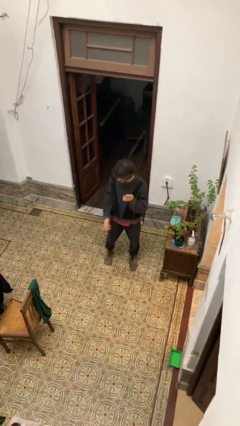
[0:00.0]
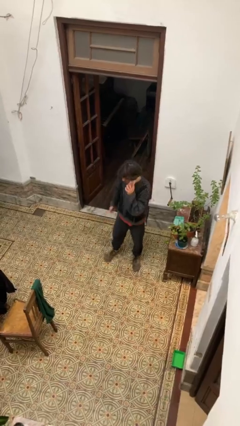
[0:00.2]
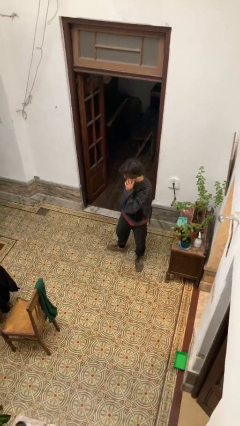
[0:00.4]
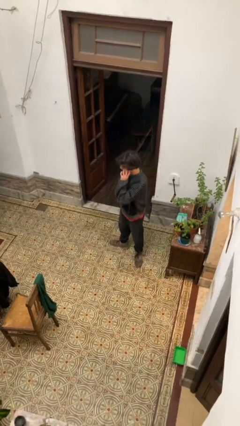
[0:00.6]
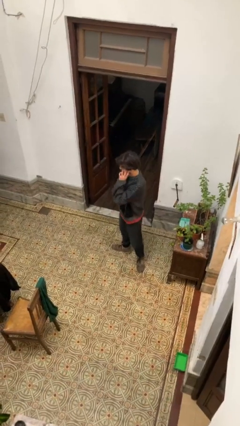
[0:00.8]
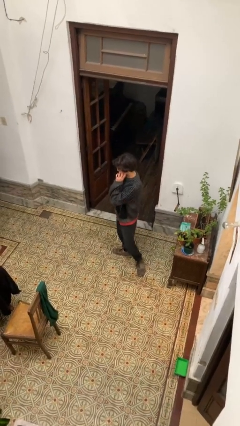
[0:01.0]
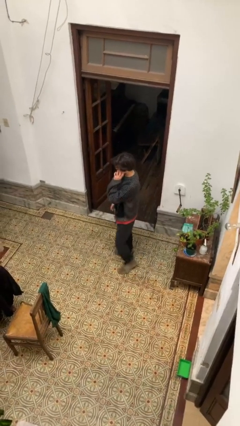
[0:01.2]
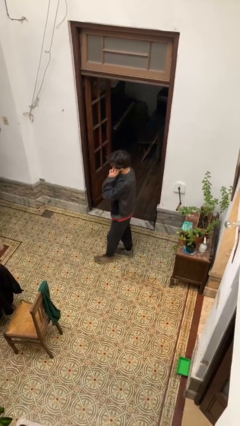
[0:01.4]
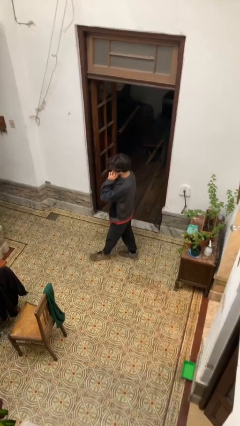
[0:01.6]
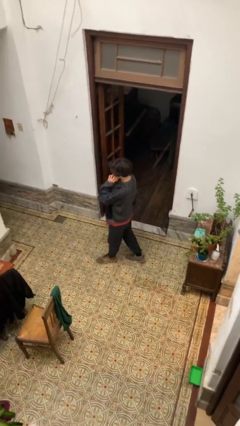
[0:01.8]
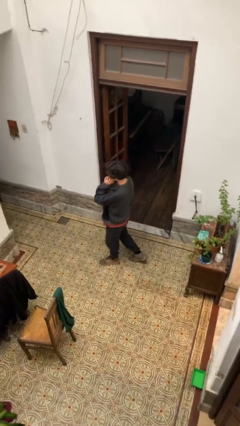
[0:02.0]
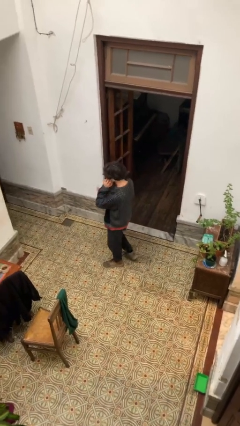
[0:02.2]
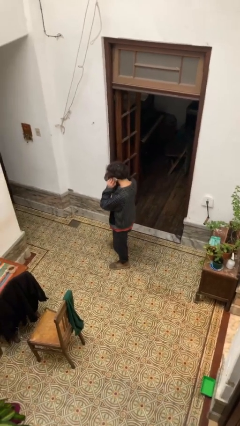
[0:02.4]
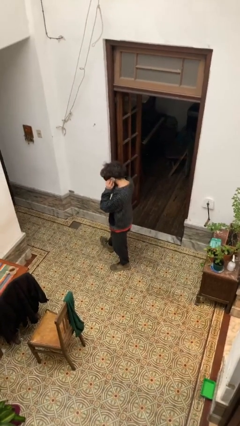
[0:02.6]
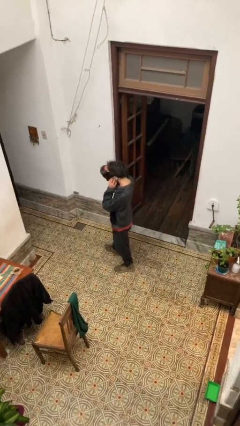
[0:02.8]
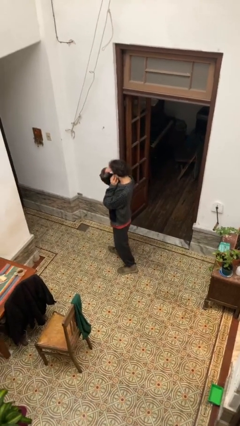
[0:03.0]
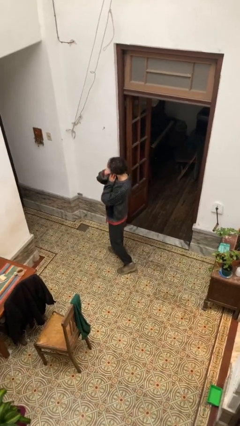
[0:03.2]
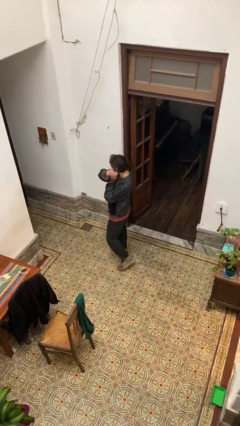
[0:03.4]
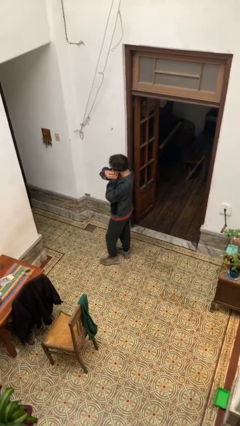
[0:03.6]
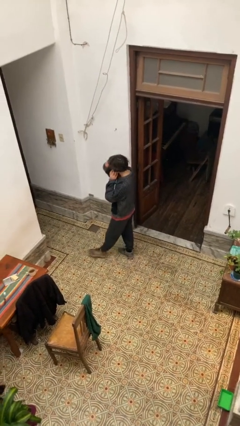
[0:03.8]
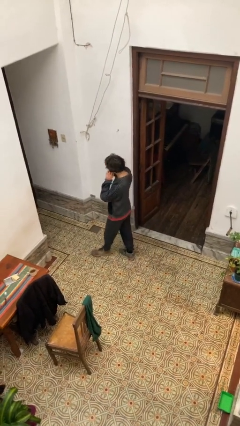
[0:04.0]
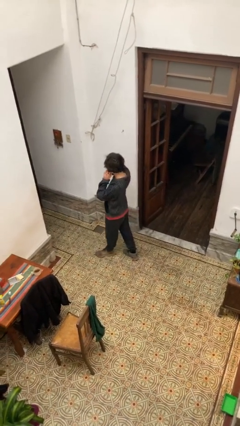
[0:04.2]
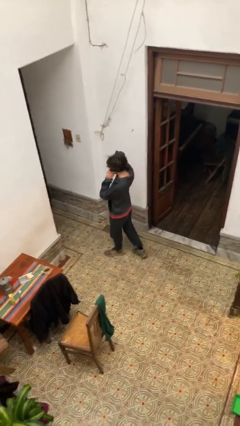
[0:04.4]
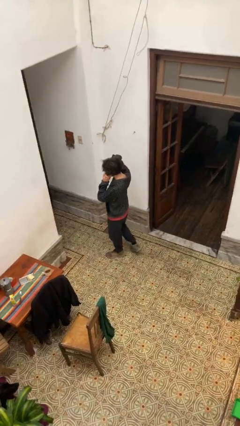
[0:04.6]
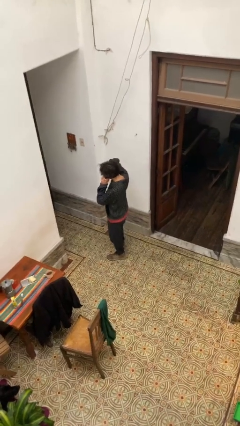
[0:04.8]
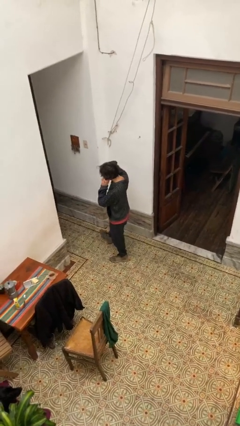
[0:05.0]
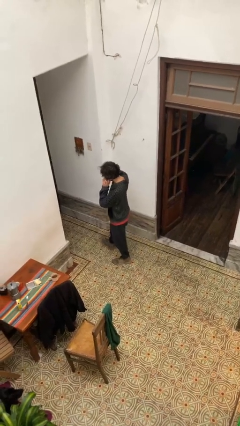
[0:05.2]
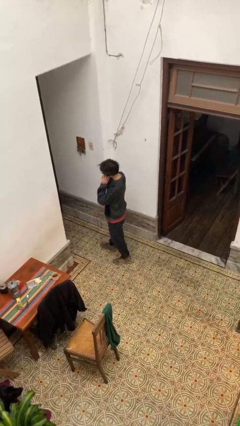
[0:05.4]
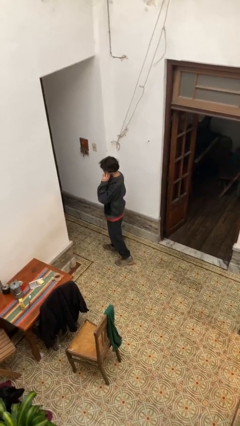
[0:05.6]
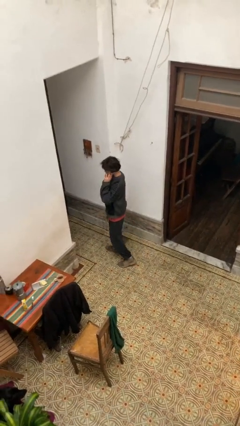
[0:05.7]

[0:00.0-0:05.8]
person talks on phone

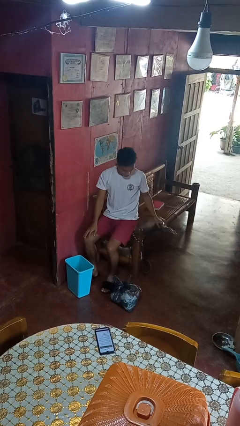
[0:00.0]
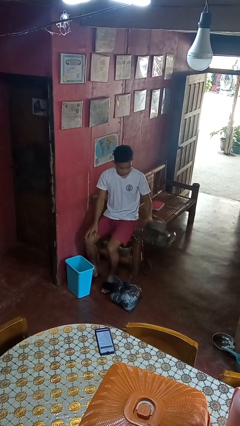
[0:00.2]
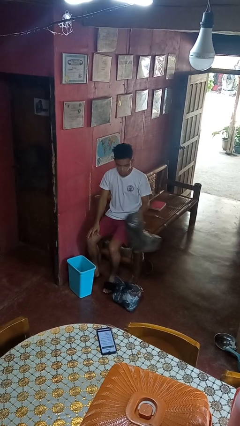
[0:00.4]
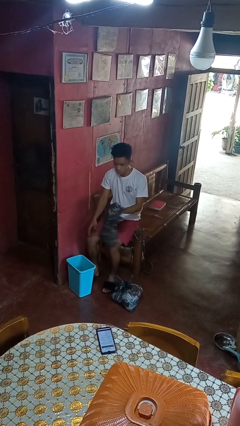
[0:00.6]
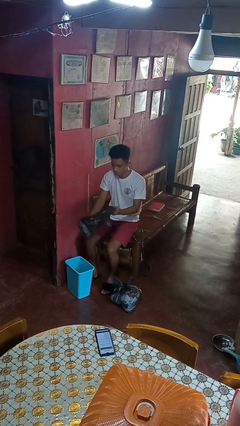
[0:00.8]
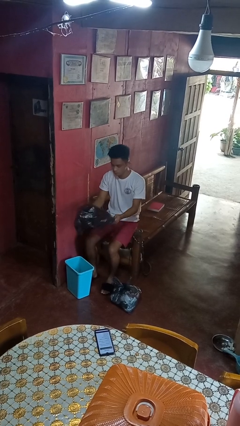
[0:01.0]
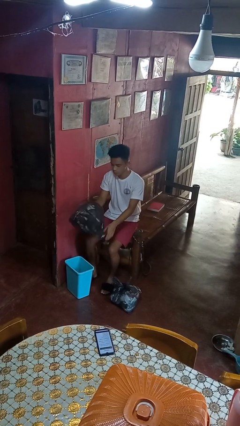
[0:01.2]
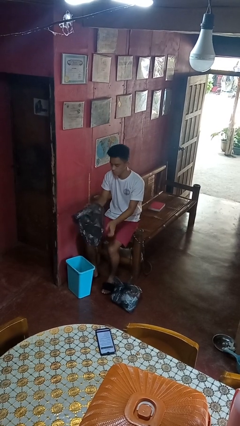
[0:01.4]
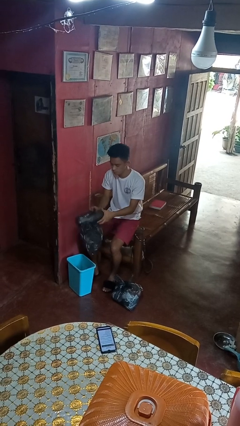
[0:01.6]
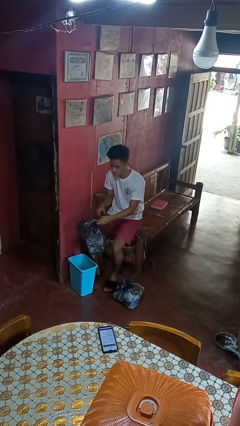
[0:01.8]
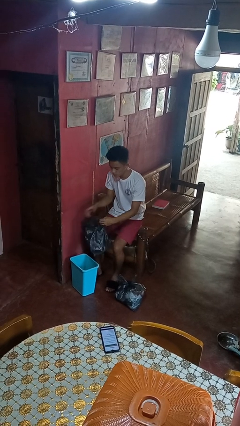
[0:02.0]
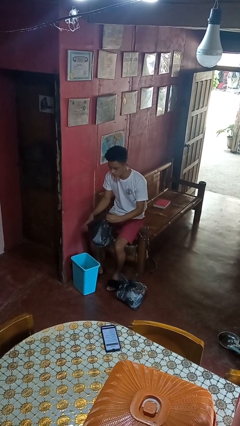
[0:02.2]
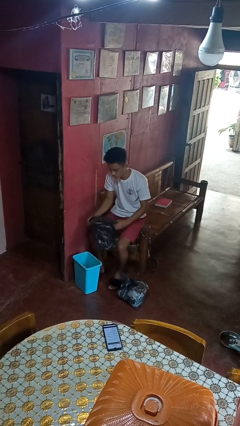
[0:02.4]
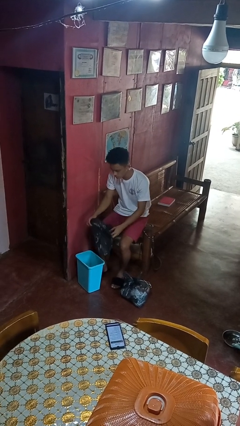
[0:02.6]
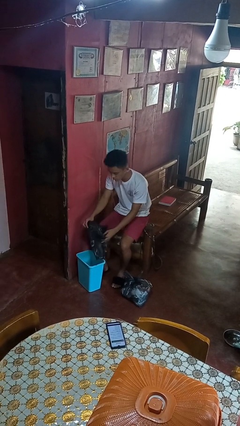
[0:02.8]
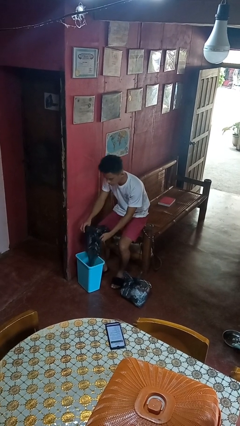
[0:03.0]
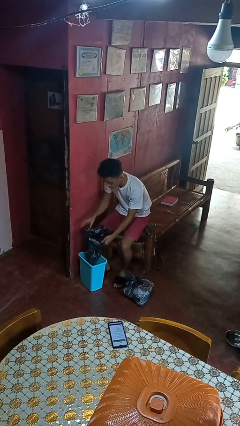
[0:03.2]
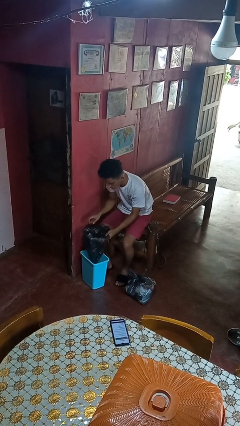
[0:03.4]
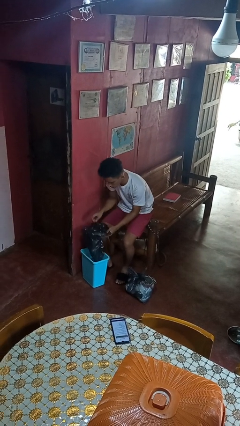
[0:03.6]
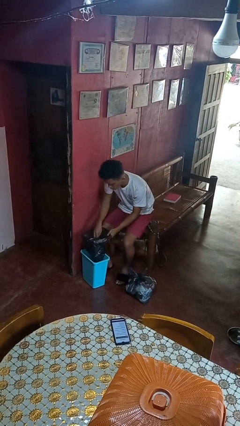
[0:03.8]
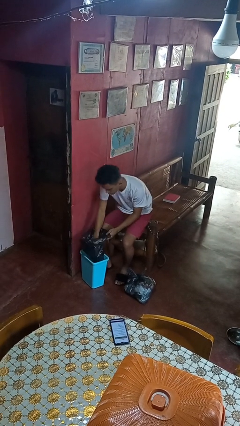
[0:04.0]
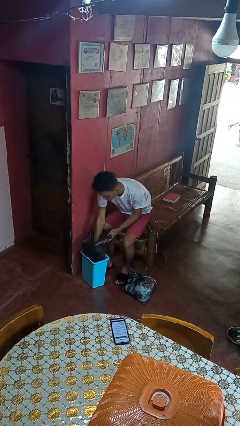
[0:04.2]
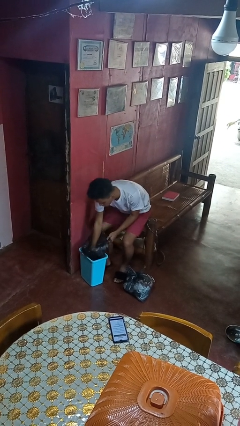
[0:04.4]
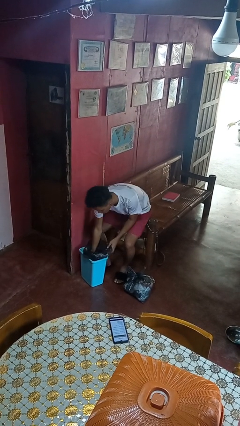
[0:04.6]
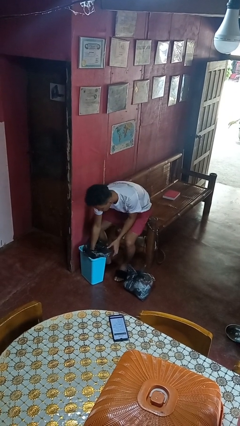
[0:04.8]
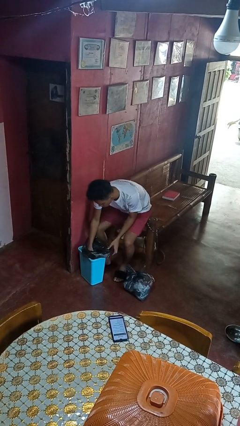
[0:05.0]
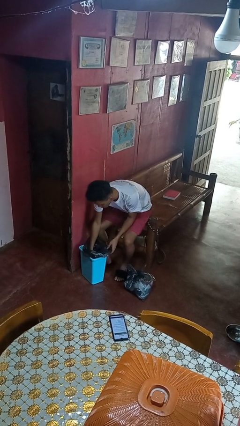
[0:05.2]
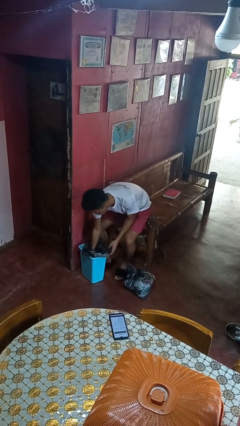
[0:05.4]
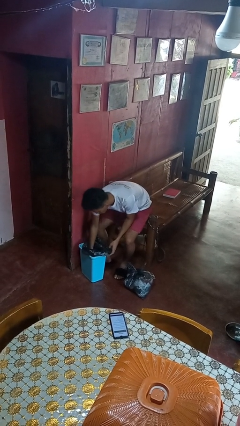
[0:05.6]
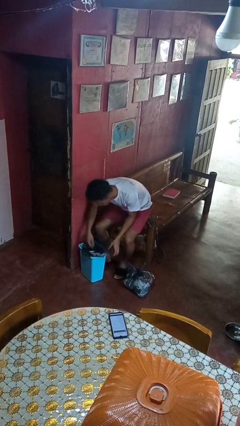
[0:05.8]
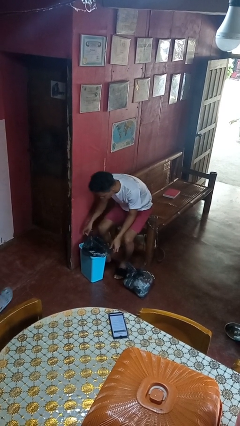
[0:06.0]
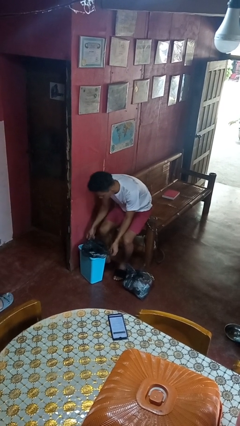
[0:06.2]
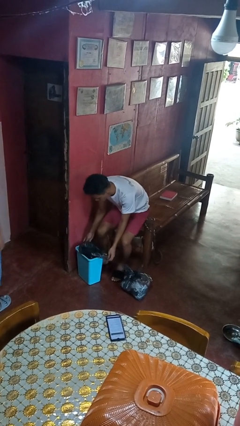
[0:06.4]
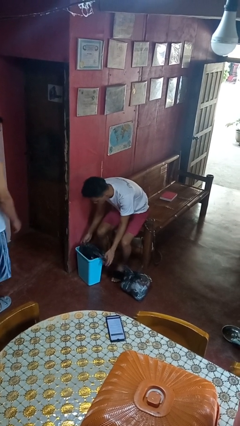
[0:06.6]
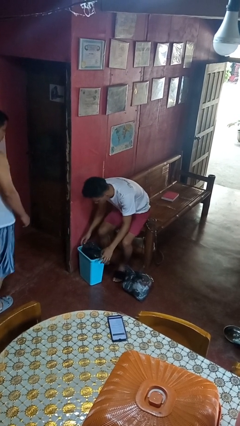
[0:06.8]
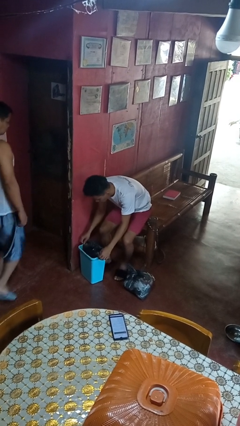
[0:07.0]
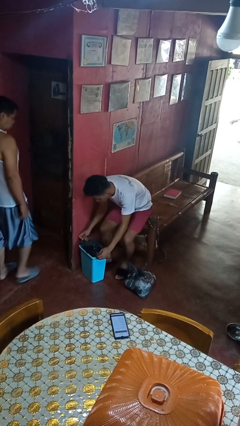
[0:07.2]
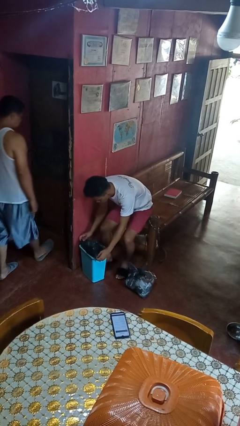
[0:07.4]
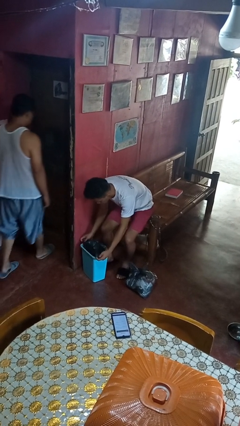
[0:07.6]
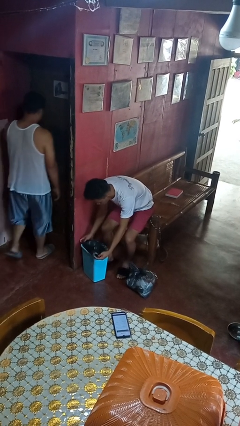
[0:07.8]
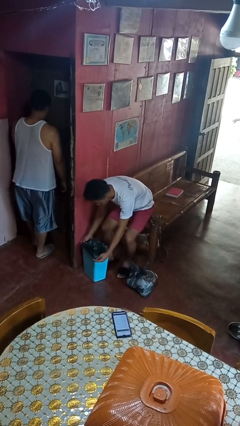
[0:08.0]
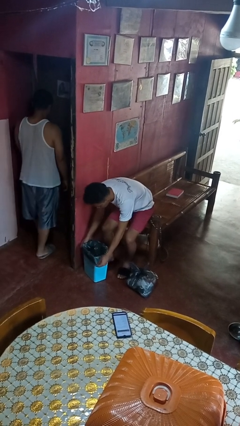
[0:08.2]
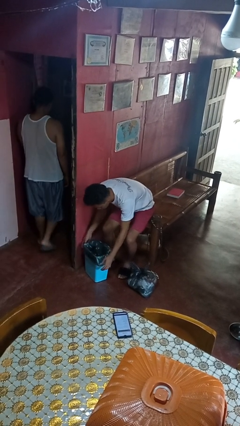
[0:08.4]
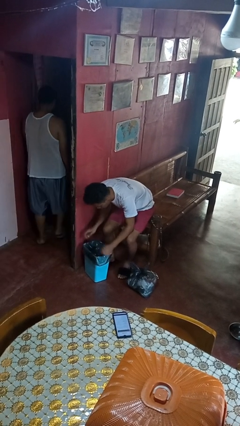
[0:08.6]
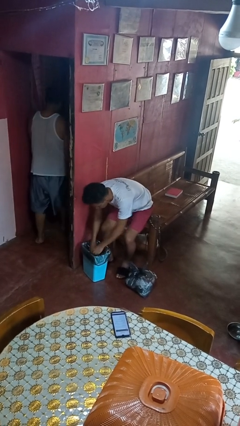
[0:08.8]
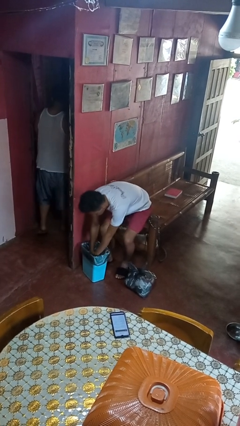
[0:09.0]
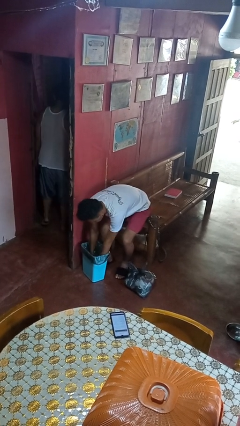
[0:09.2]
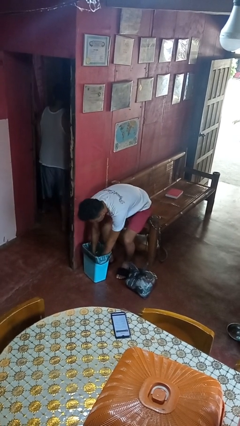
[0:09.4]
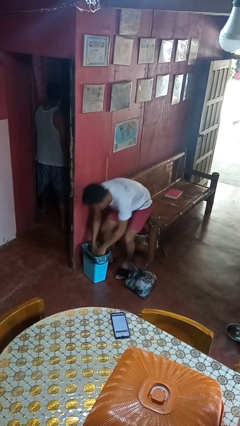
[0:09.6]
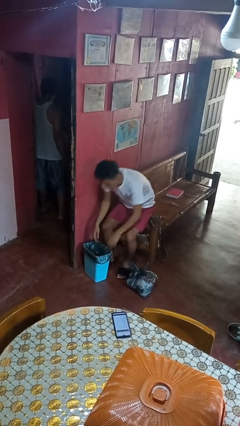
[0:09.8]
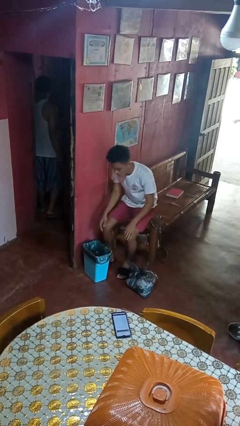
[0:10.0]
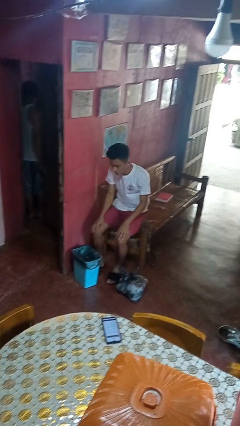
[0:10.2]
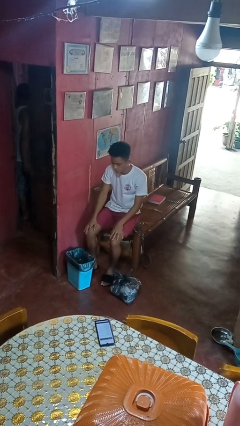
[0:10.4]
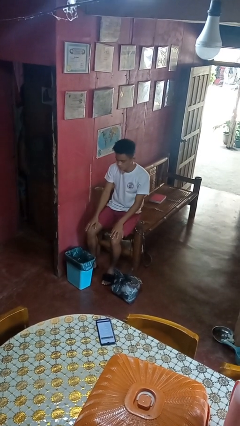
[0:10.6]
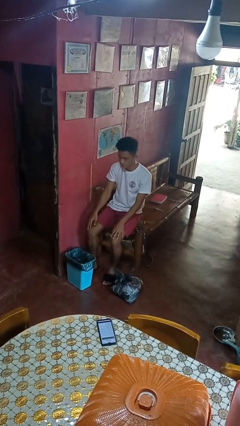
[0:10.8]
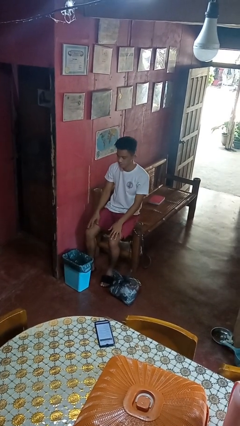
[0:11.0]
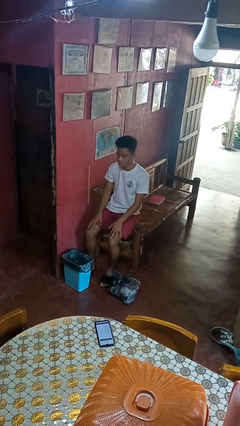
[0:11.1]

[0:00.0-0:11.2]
person inserts trashbag into trashcan

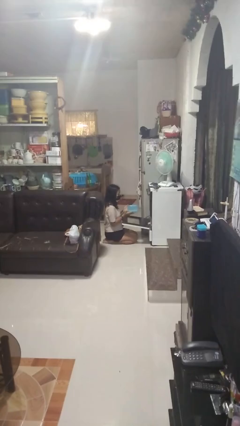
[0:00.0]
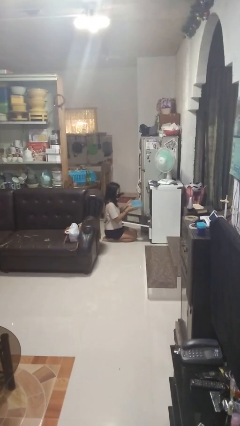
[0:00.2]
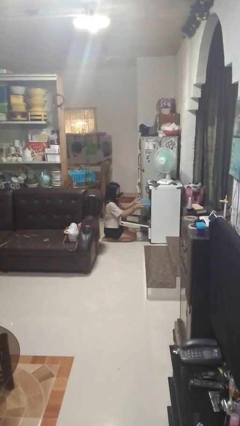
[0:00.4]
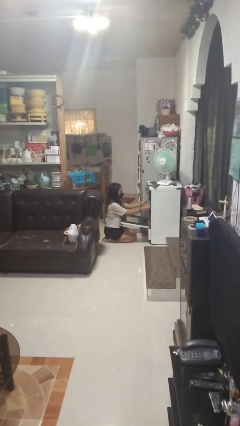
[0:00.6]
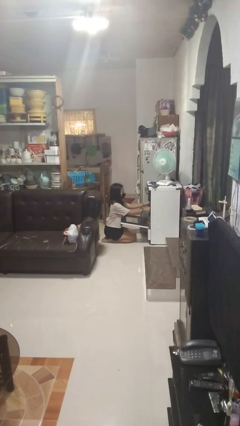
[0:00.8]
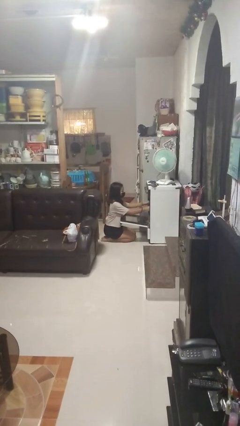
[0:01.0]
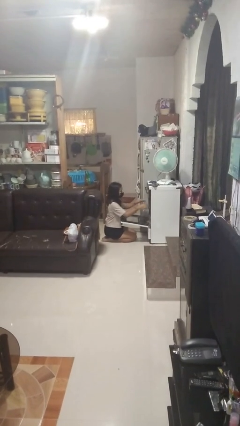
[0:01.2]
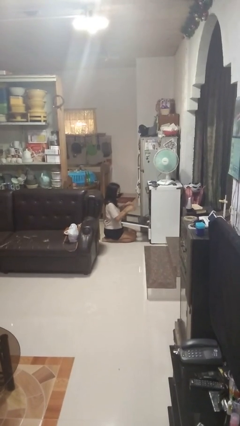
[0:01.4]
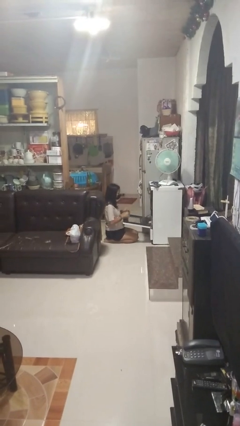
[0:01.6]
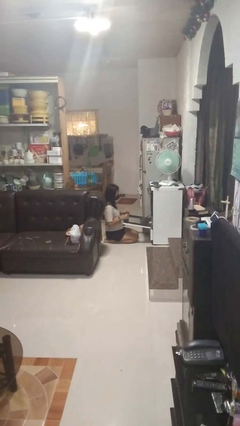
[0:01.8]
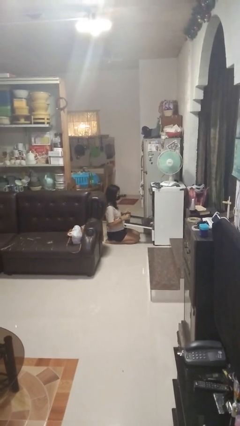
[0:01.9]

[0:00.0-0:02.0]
person puts object into oven
